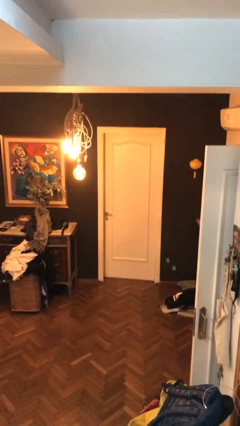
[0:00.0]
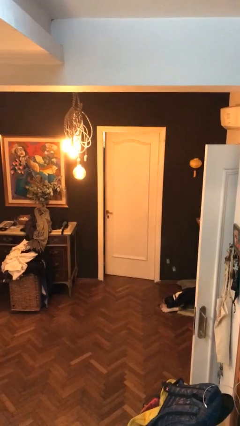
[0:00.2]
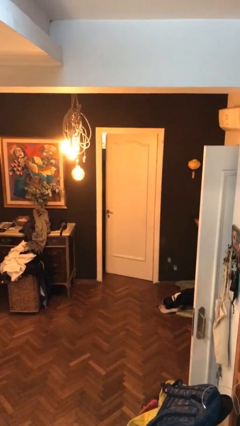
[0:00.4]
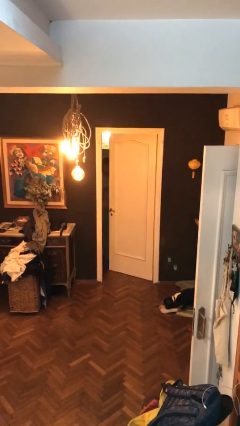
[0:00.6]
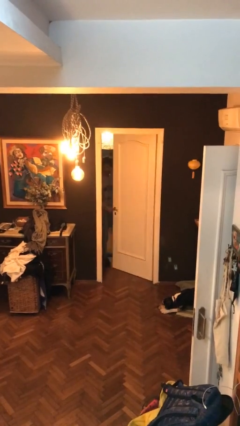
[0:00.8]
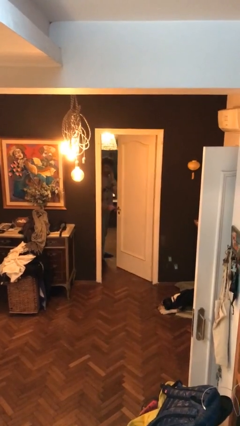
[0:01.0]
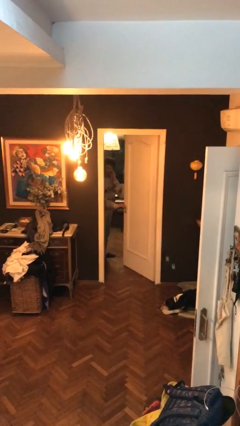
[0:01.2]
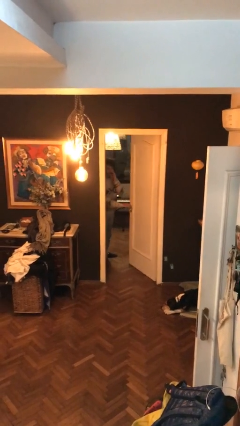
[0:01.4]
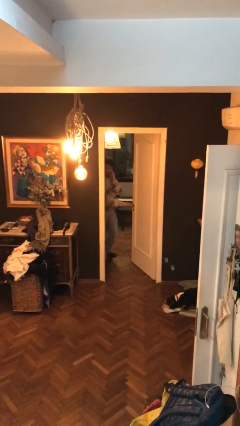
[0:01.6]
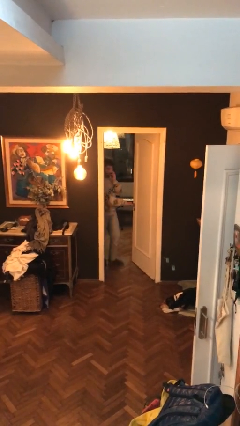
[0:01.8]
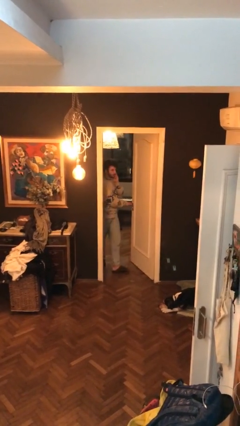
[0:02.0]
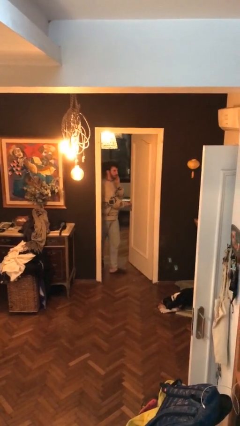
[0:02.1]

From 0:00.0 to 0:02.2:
person opens facility door

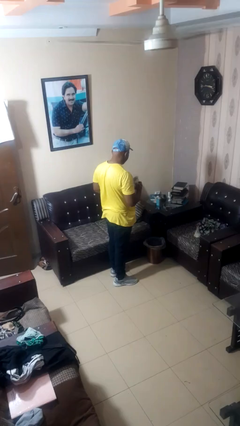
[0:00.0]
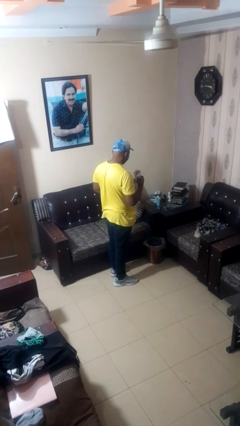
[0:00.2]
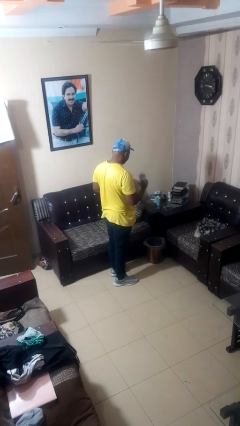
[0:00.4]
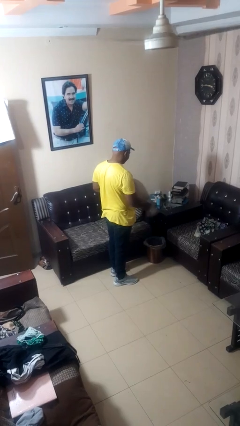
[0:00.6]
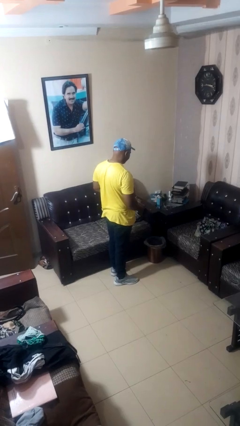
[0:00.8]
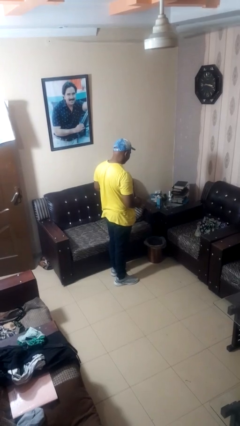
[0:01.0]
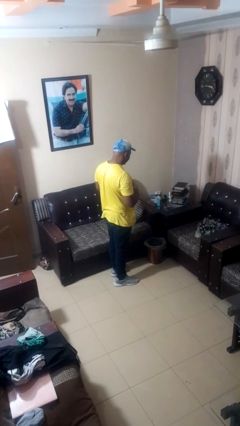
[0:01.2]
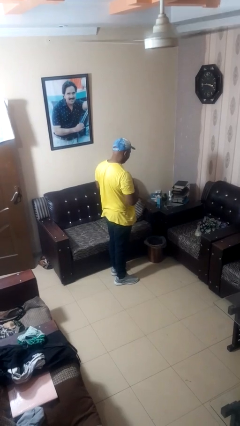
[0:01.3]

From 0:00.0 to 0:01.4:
person discards trash

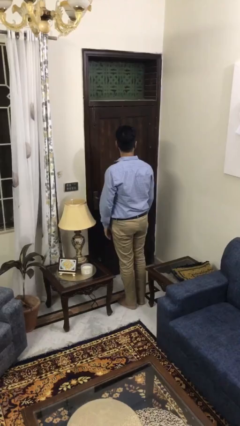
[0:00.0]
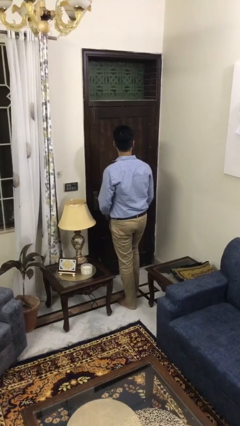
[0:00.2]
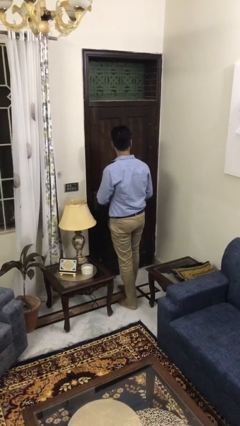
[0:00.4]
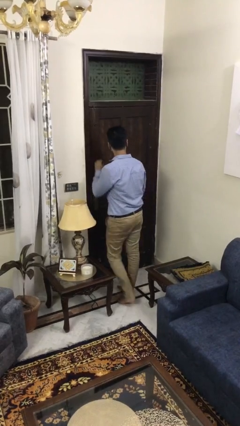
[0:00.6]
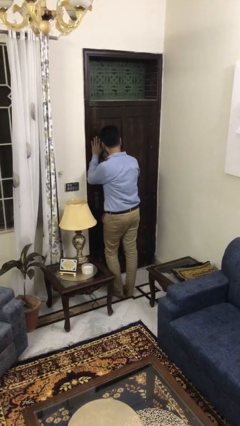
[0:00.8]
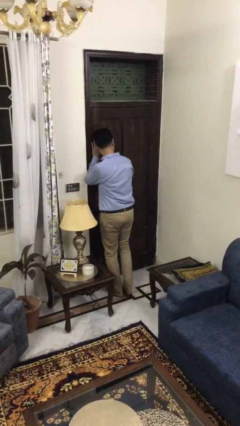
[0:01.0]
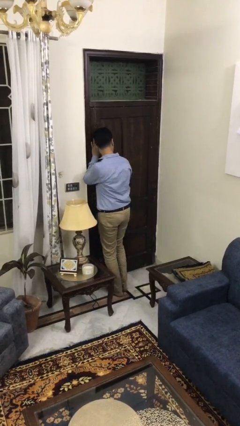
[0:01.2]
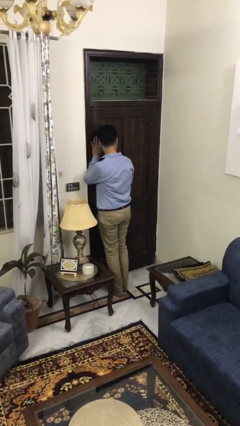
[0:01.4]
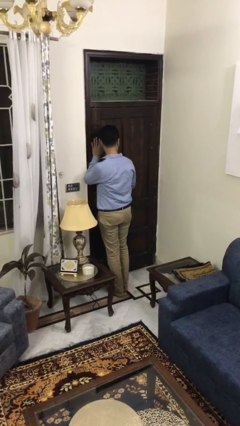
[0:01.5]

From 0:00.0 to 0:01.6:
person bumps into wall

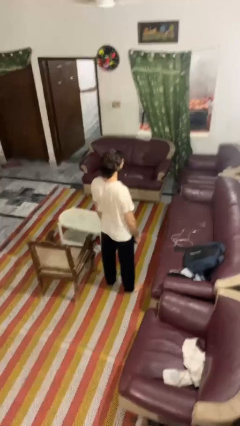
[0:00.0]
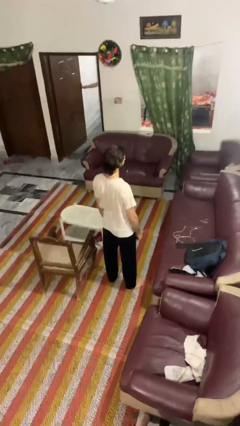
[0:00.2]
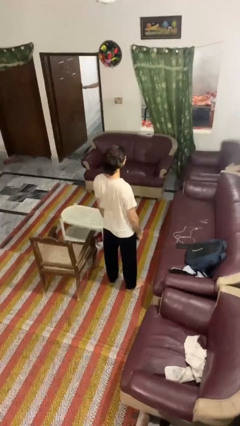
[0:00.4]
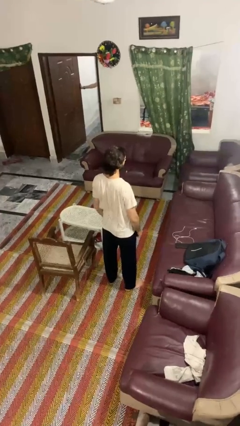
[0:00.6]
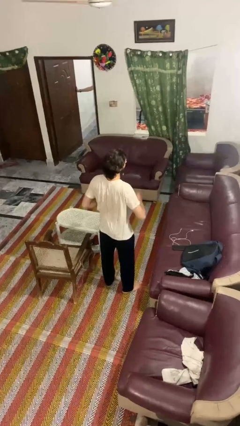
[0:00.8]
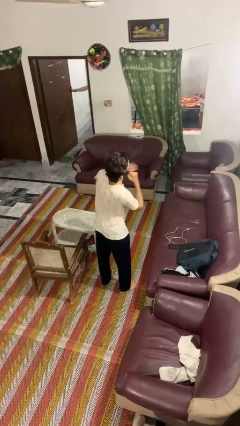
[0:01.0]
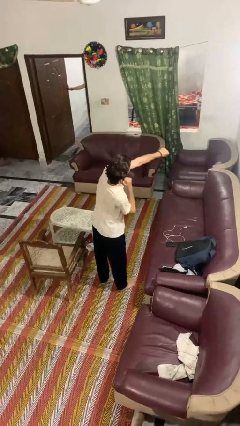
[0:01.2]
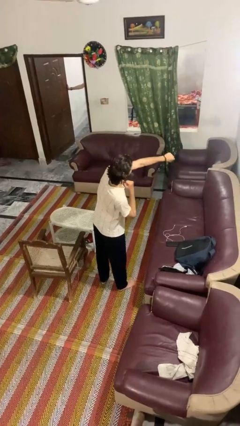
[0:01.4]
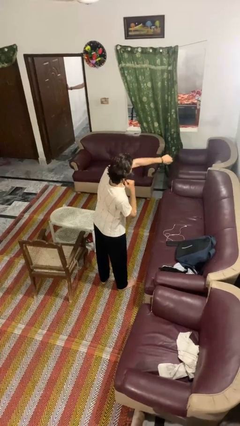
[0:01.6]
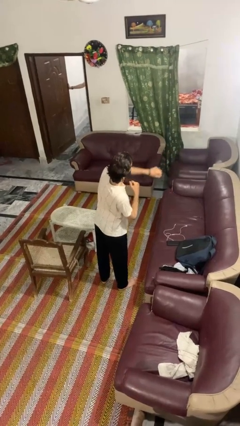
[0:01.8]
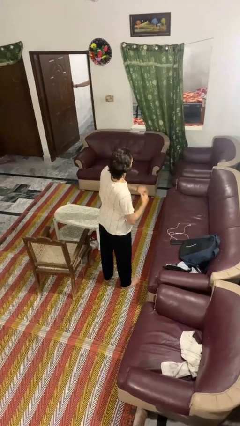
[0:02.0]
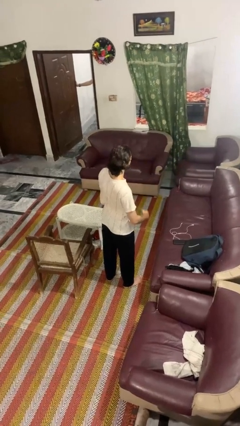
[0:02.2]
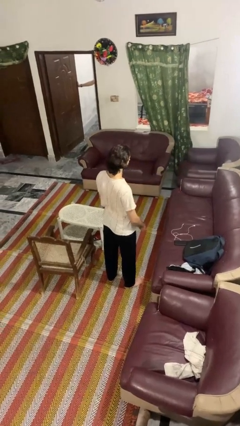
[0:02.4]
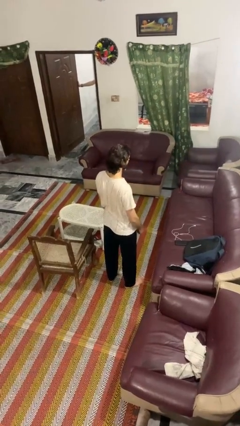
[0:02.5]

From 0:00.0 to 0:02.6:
person punches

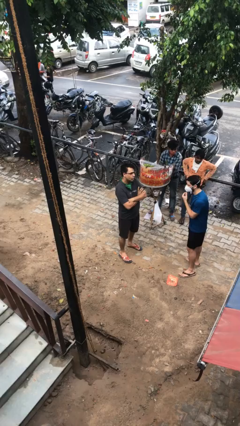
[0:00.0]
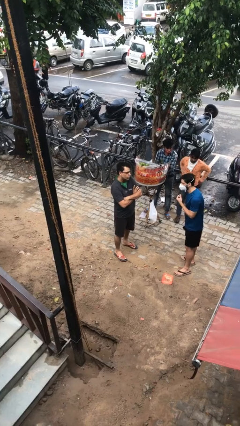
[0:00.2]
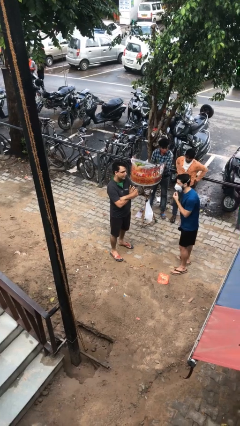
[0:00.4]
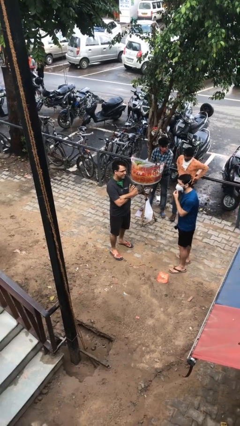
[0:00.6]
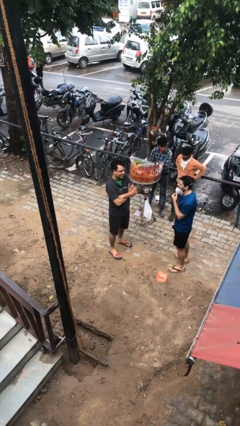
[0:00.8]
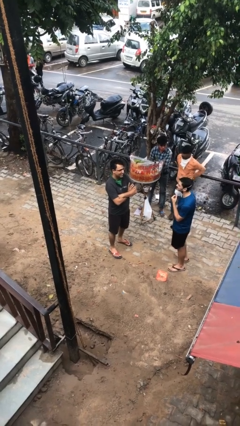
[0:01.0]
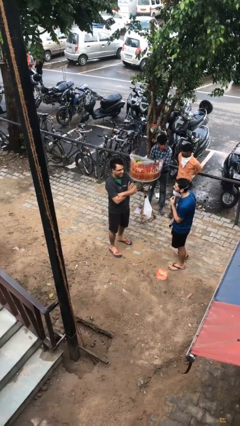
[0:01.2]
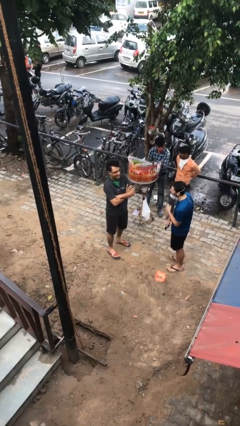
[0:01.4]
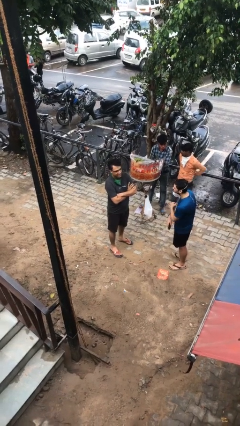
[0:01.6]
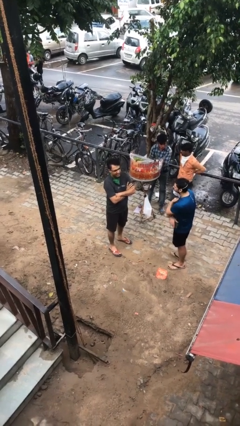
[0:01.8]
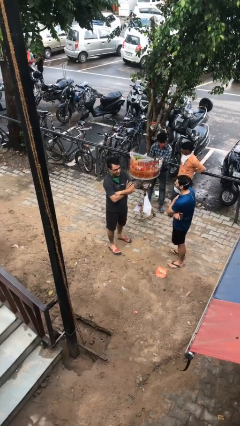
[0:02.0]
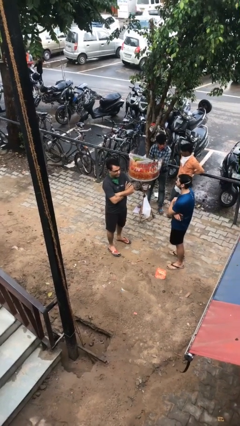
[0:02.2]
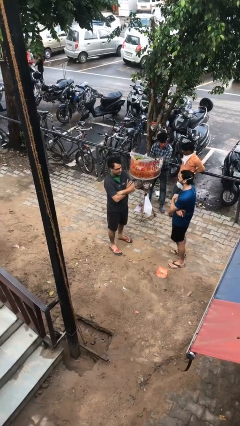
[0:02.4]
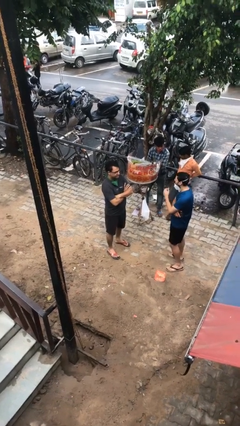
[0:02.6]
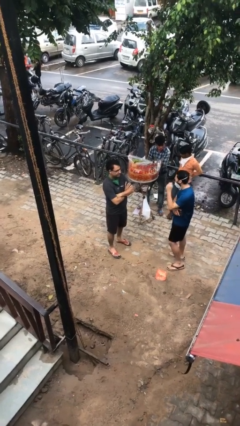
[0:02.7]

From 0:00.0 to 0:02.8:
person laughs with person

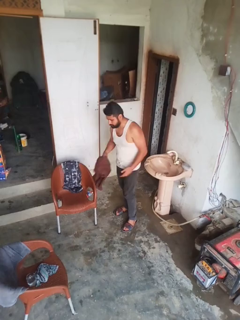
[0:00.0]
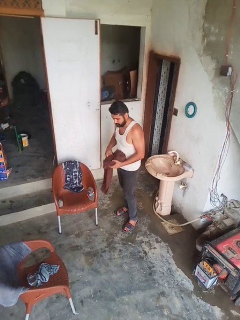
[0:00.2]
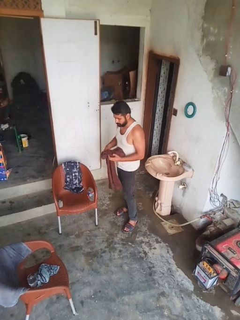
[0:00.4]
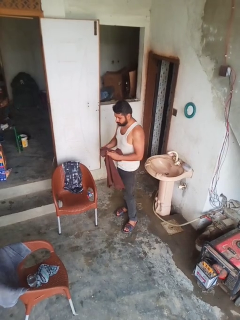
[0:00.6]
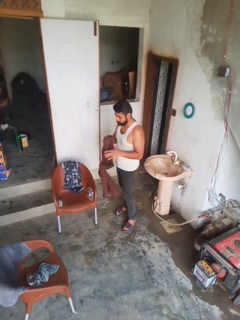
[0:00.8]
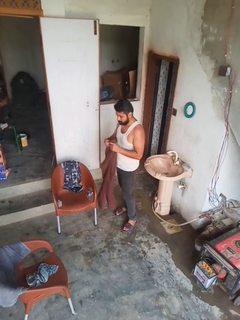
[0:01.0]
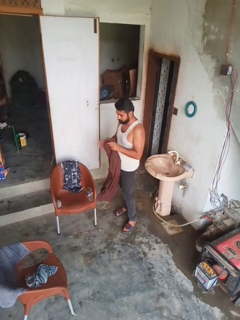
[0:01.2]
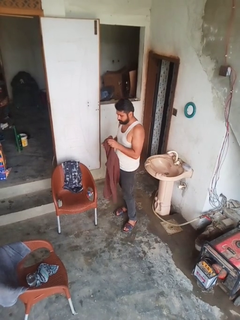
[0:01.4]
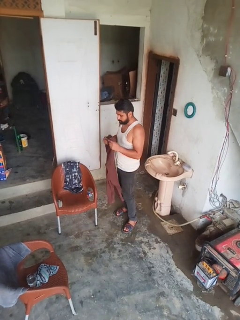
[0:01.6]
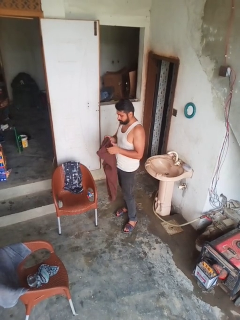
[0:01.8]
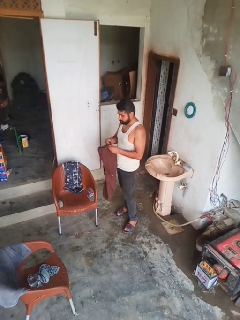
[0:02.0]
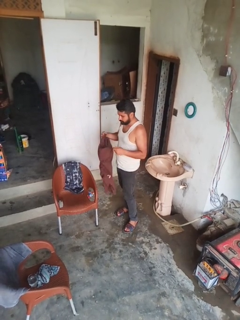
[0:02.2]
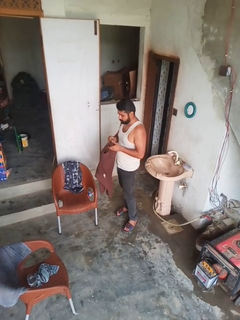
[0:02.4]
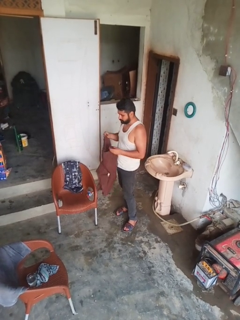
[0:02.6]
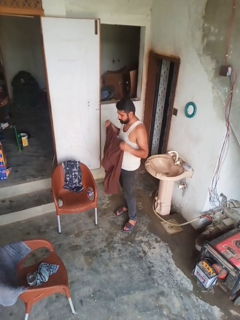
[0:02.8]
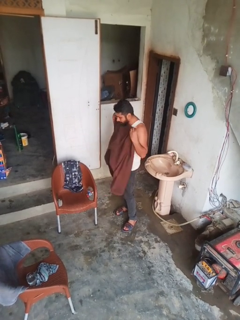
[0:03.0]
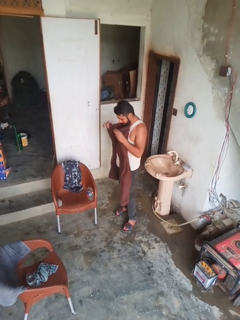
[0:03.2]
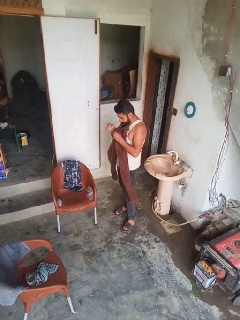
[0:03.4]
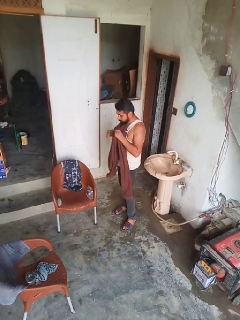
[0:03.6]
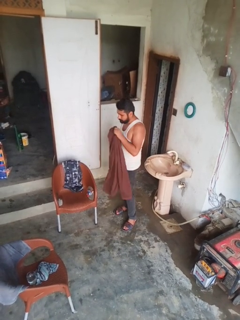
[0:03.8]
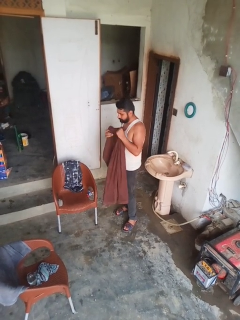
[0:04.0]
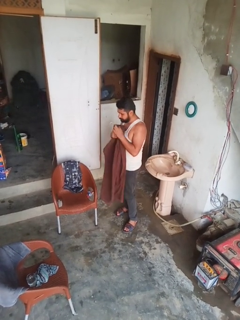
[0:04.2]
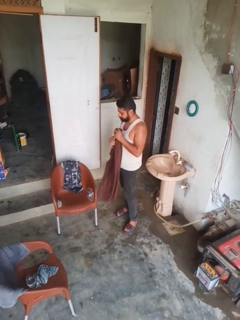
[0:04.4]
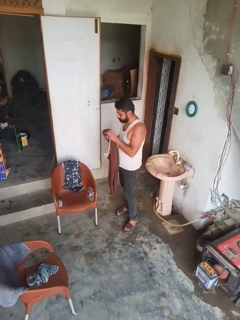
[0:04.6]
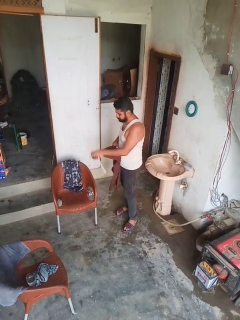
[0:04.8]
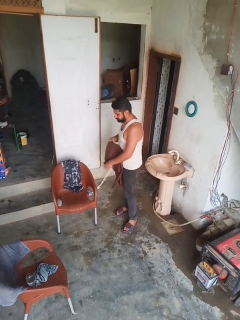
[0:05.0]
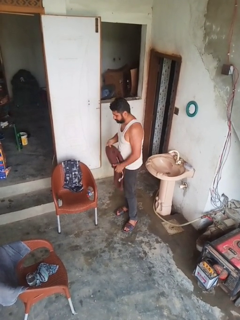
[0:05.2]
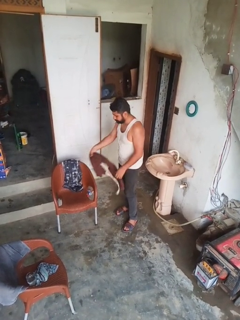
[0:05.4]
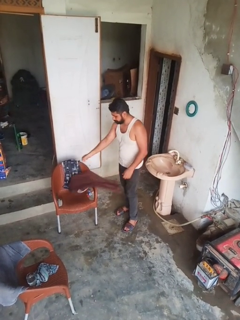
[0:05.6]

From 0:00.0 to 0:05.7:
person folds pants

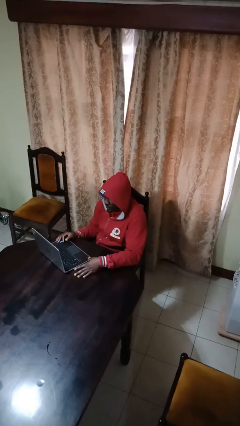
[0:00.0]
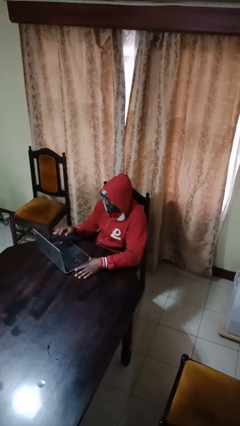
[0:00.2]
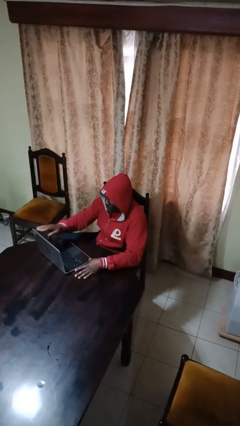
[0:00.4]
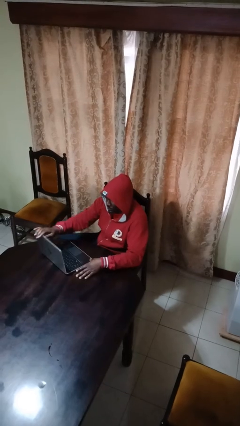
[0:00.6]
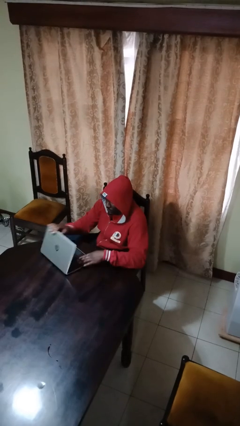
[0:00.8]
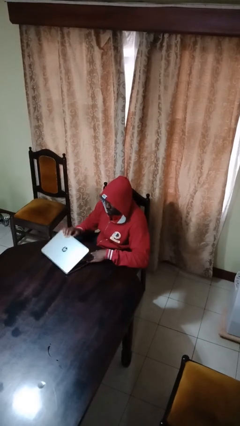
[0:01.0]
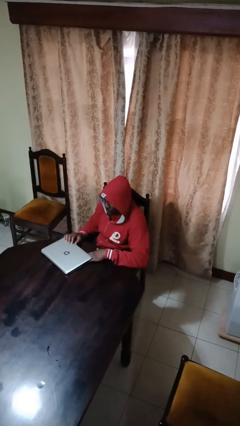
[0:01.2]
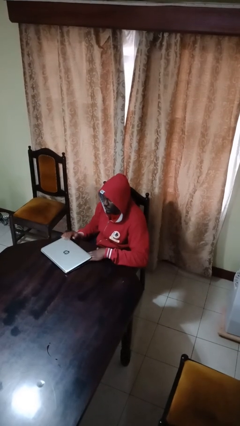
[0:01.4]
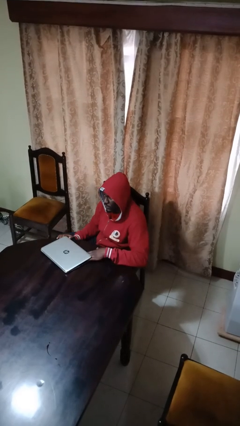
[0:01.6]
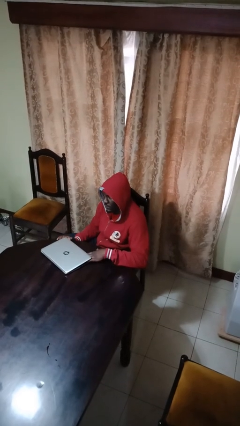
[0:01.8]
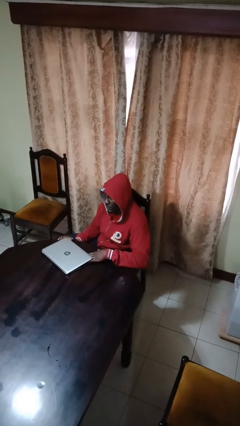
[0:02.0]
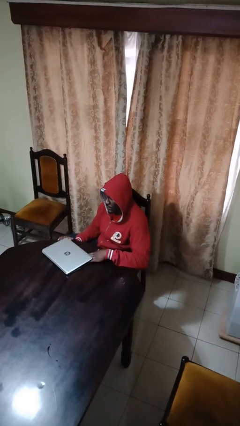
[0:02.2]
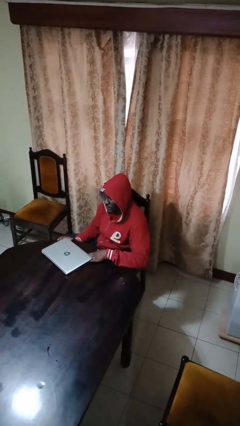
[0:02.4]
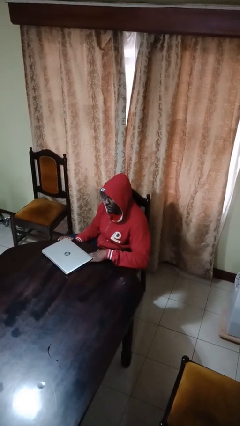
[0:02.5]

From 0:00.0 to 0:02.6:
person closes laptop

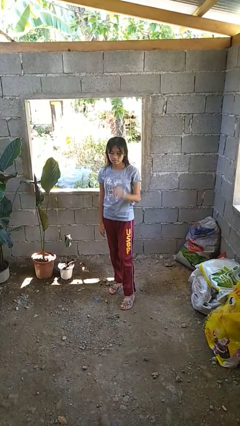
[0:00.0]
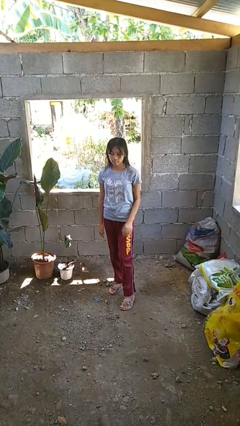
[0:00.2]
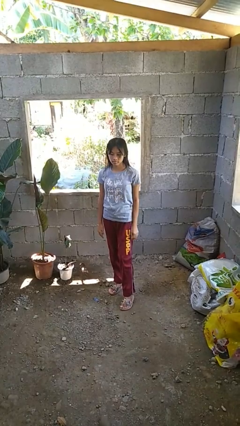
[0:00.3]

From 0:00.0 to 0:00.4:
person gestures lower hand
